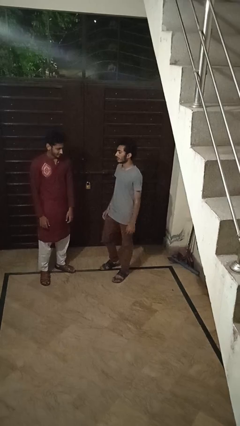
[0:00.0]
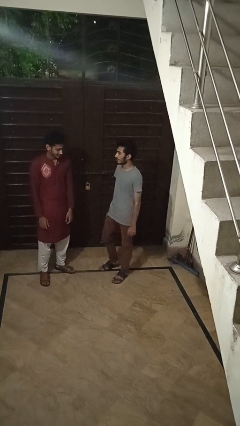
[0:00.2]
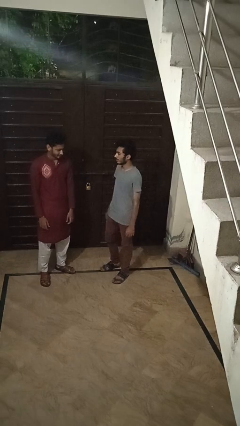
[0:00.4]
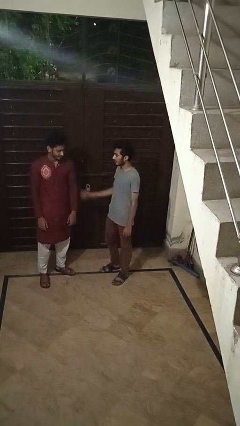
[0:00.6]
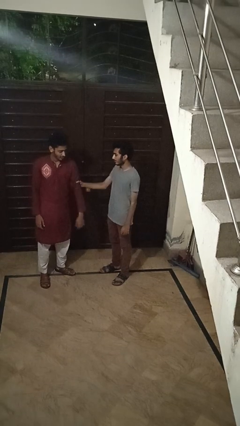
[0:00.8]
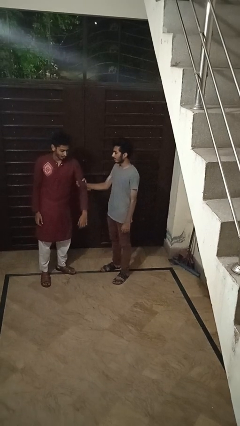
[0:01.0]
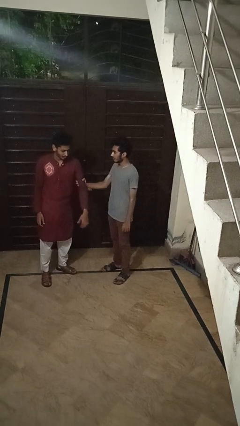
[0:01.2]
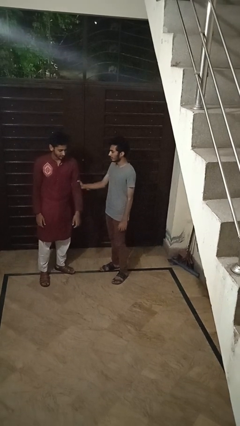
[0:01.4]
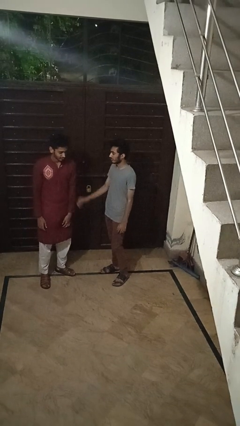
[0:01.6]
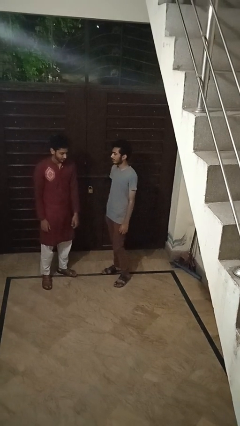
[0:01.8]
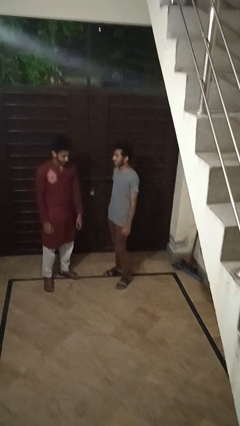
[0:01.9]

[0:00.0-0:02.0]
person grabs person by bicep

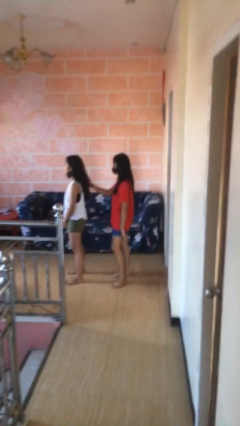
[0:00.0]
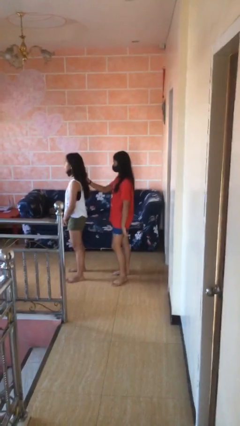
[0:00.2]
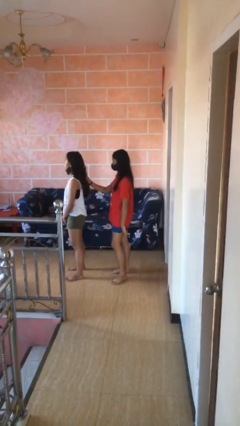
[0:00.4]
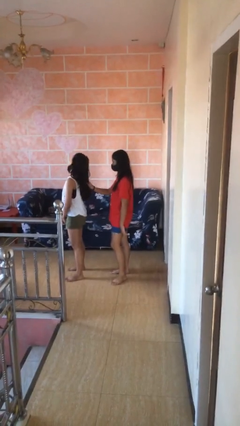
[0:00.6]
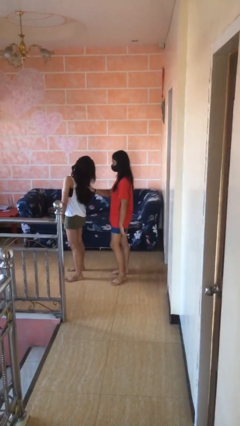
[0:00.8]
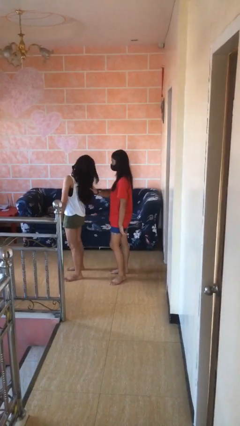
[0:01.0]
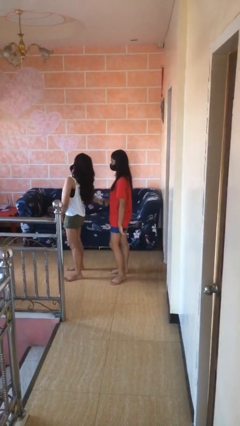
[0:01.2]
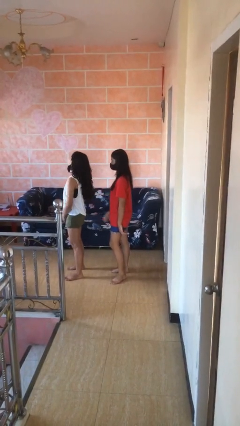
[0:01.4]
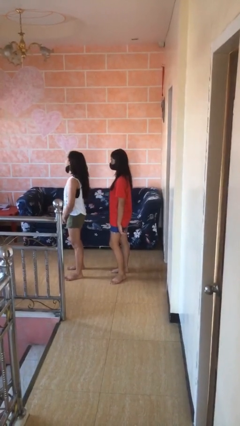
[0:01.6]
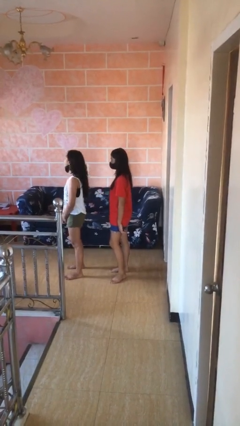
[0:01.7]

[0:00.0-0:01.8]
person grabs person by hair

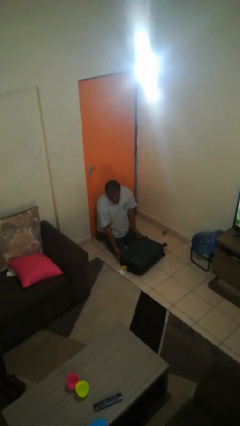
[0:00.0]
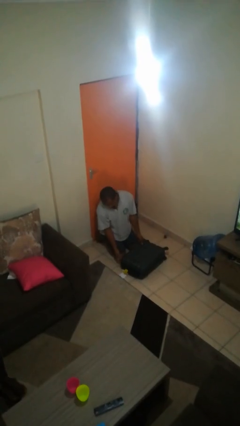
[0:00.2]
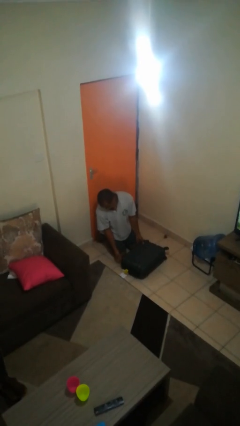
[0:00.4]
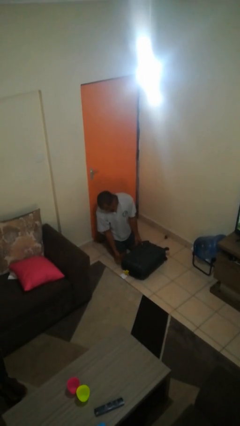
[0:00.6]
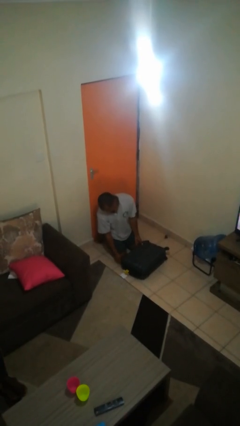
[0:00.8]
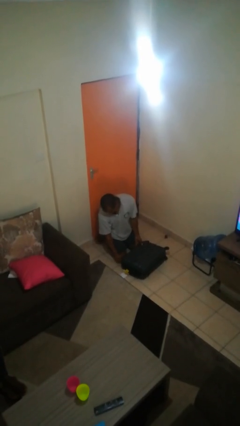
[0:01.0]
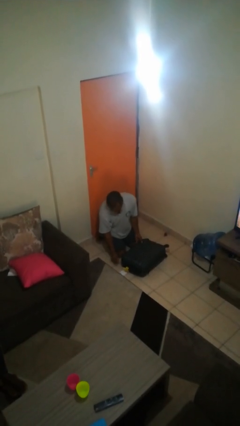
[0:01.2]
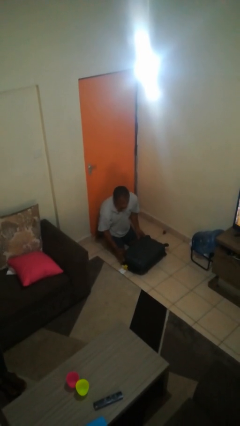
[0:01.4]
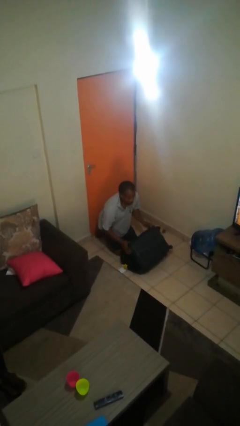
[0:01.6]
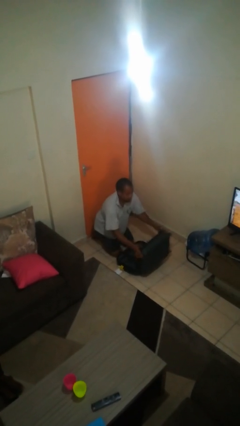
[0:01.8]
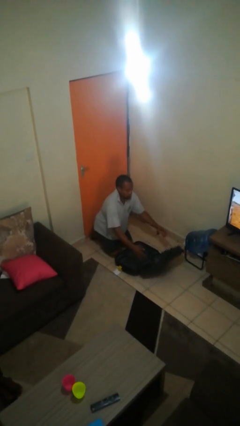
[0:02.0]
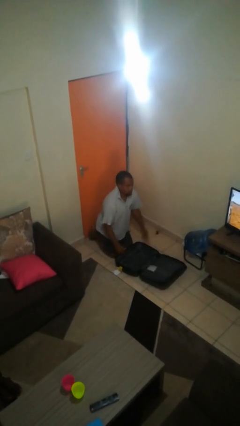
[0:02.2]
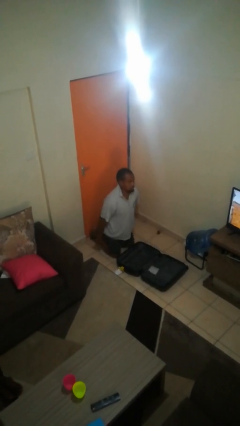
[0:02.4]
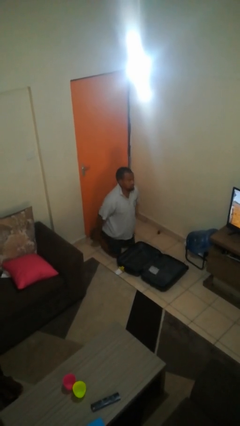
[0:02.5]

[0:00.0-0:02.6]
person opens suitcase

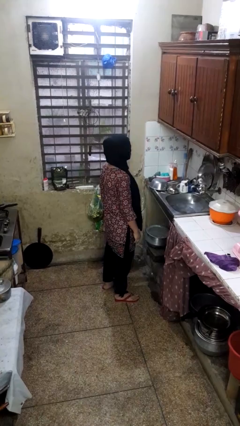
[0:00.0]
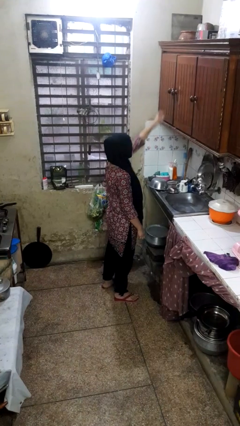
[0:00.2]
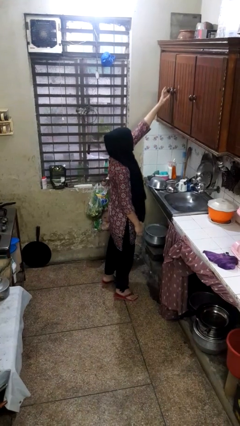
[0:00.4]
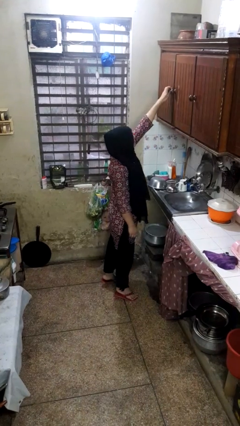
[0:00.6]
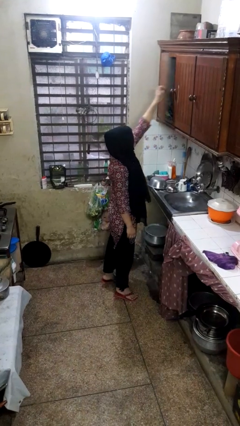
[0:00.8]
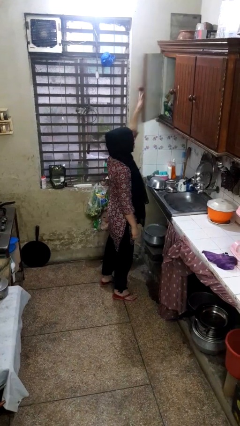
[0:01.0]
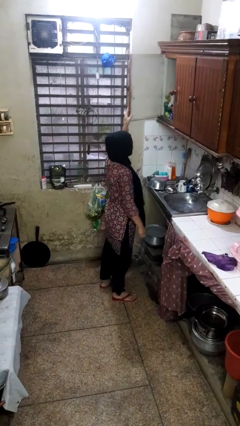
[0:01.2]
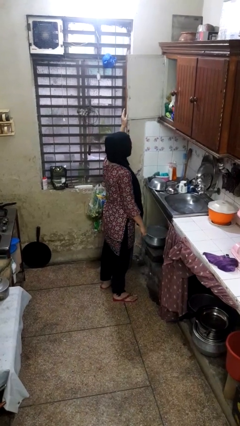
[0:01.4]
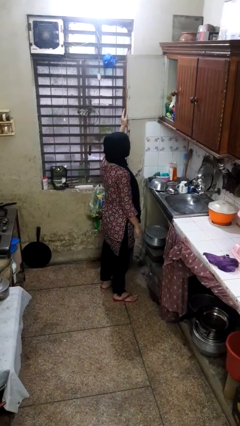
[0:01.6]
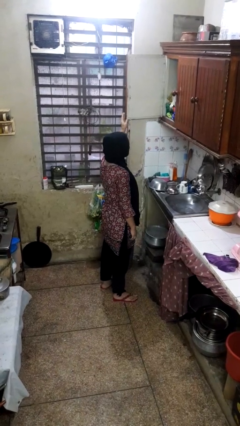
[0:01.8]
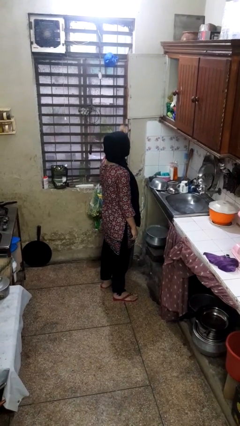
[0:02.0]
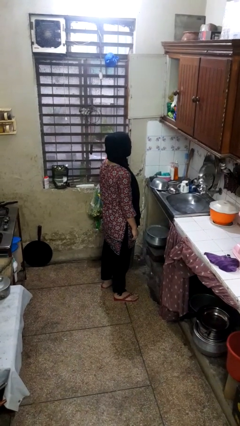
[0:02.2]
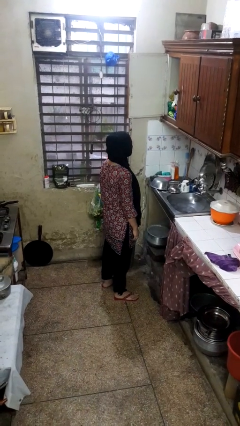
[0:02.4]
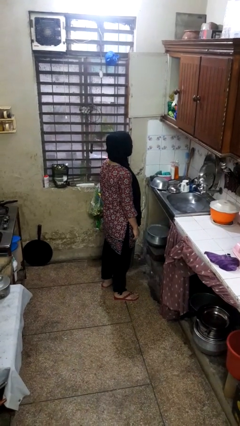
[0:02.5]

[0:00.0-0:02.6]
person opens cabinet

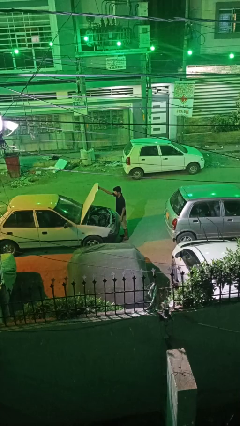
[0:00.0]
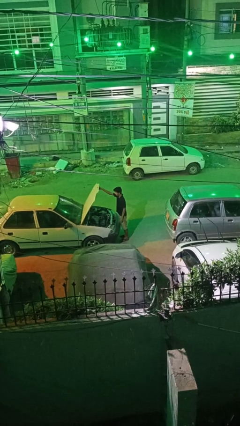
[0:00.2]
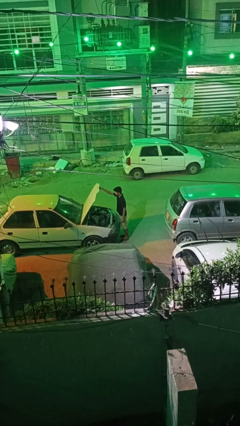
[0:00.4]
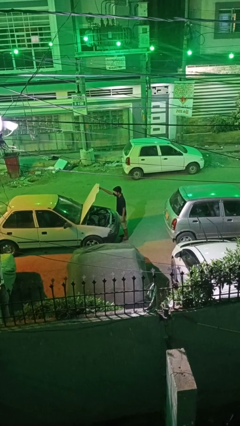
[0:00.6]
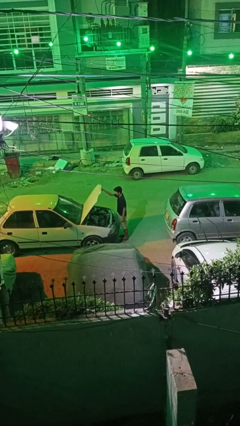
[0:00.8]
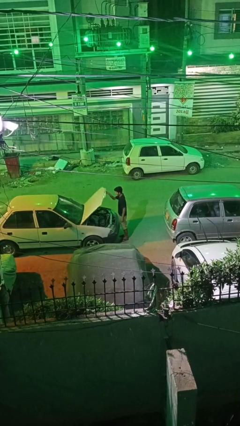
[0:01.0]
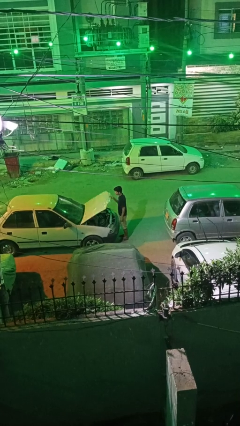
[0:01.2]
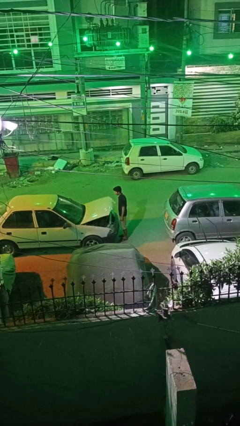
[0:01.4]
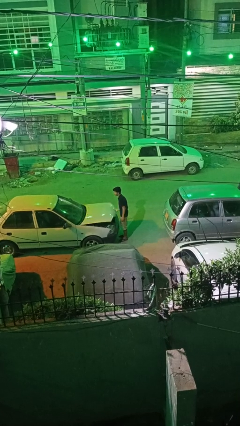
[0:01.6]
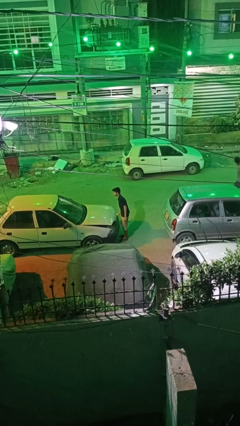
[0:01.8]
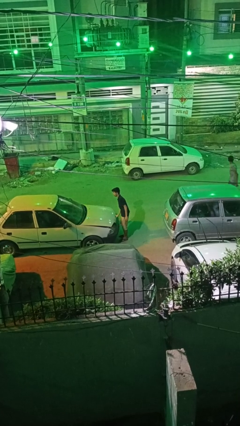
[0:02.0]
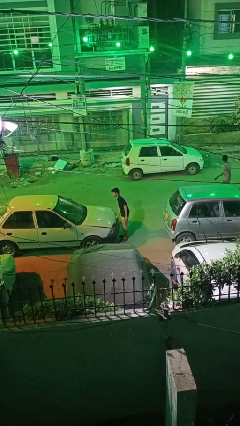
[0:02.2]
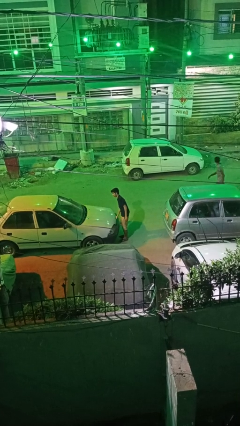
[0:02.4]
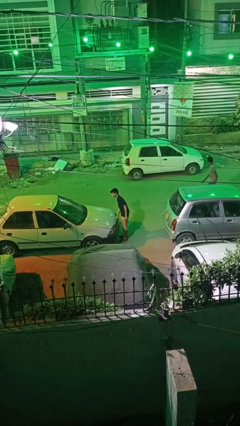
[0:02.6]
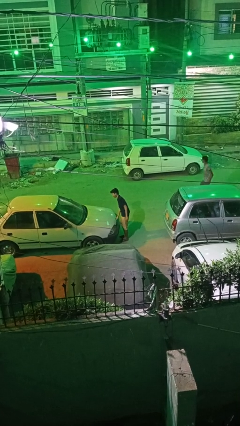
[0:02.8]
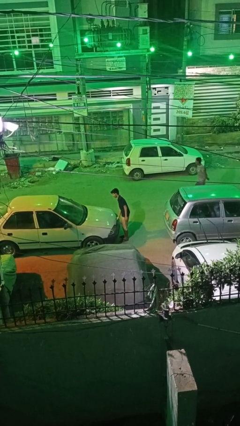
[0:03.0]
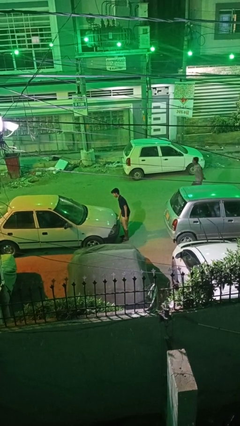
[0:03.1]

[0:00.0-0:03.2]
person closes car hood

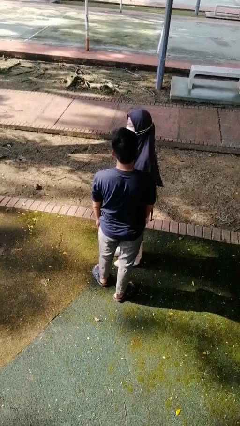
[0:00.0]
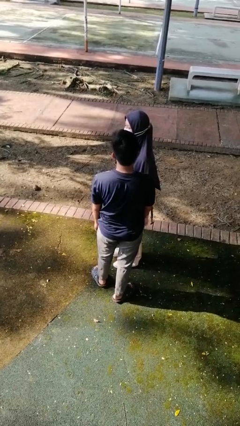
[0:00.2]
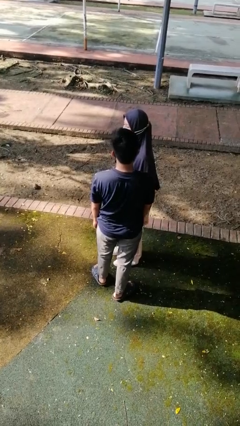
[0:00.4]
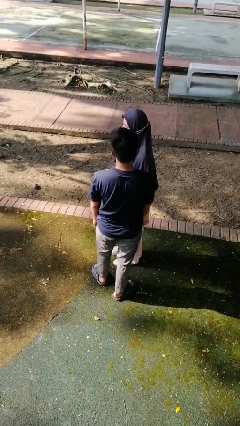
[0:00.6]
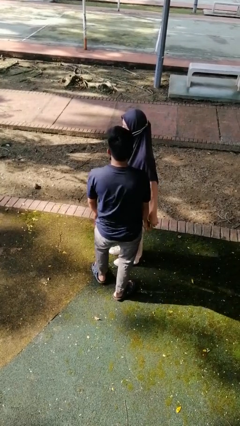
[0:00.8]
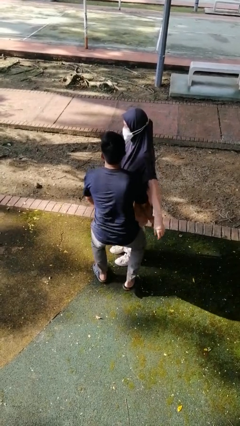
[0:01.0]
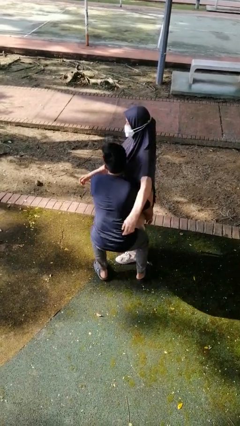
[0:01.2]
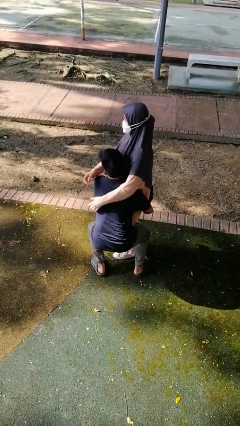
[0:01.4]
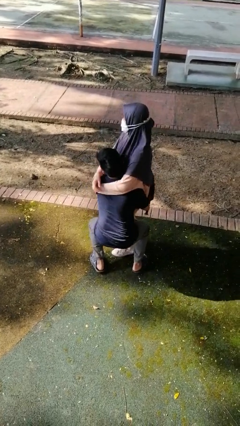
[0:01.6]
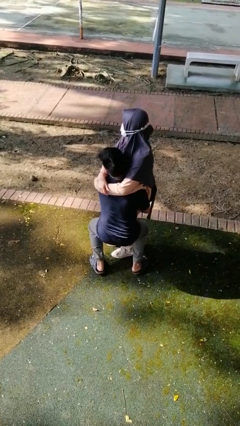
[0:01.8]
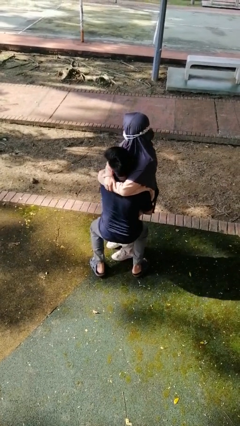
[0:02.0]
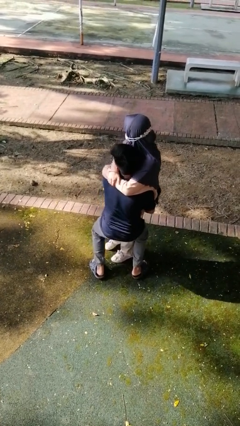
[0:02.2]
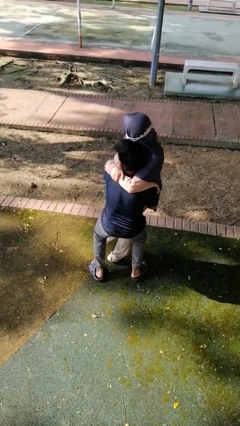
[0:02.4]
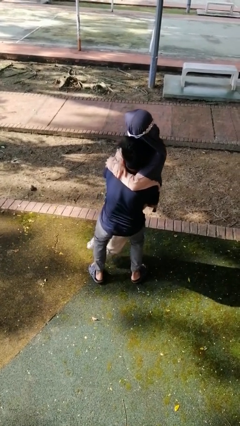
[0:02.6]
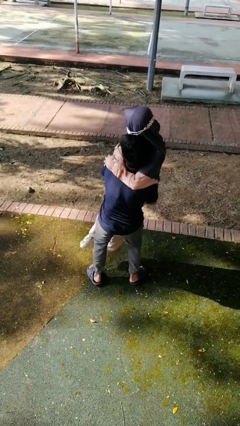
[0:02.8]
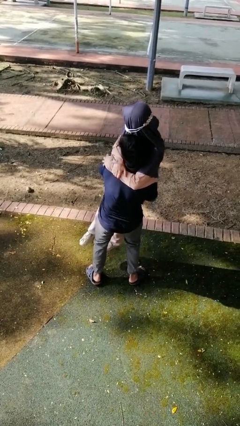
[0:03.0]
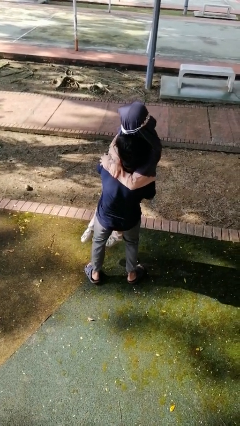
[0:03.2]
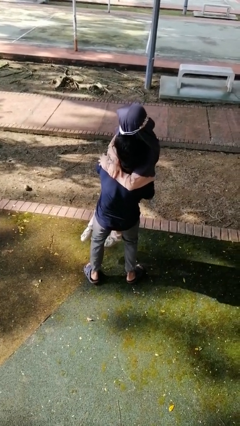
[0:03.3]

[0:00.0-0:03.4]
person picks up person

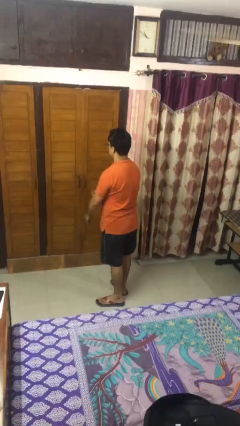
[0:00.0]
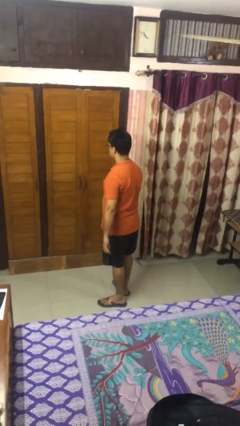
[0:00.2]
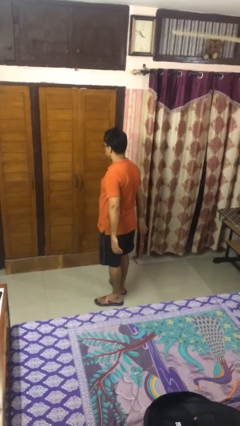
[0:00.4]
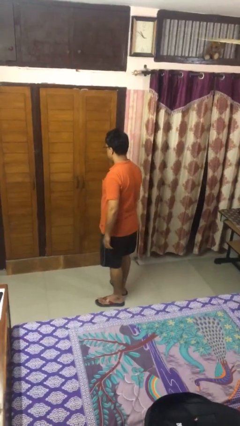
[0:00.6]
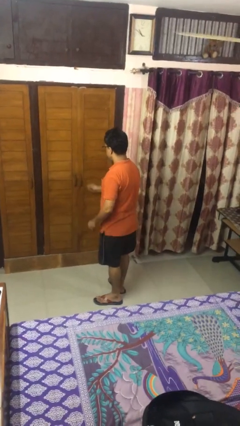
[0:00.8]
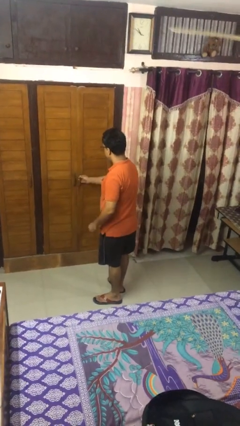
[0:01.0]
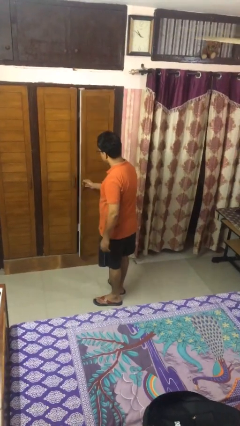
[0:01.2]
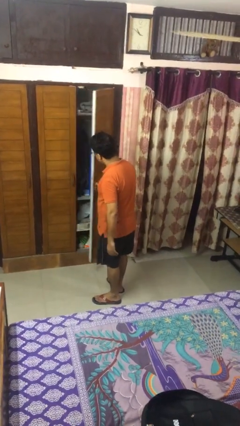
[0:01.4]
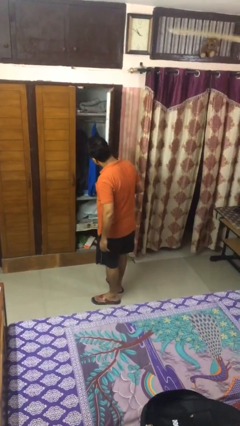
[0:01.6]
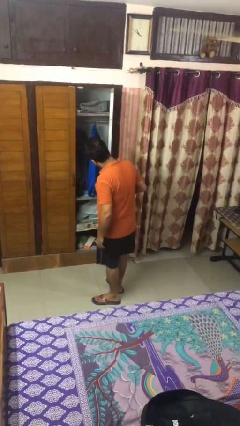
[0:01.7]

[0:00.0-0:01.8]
person opens closet door
